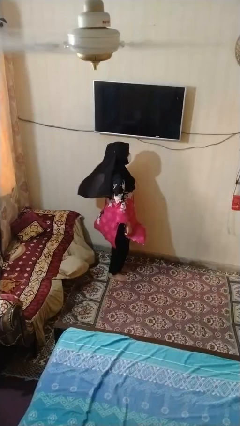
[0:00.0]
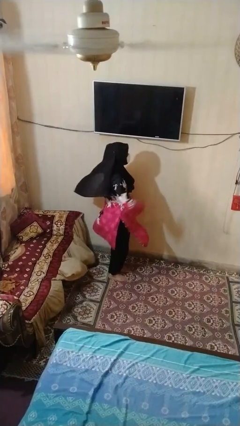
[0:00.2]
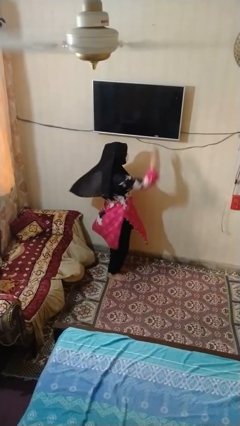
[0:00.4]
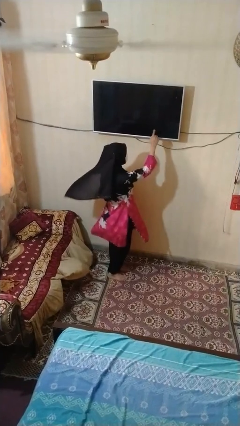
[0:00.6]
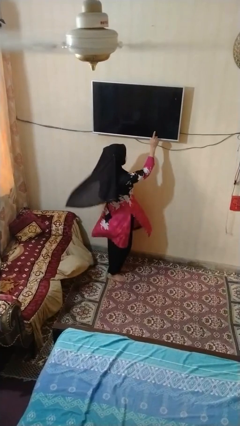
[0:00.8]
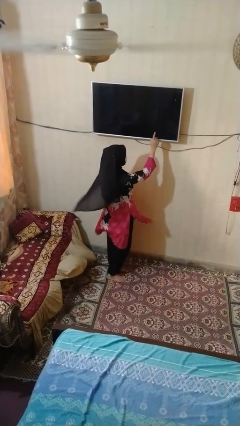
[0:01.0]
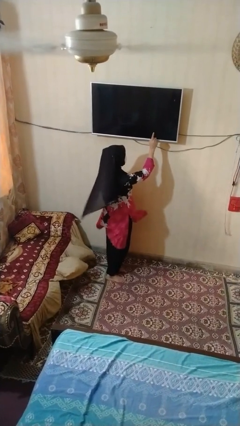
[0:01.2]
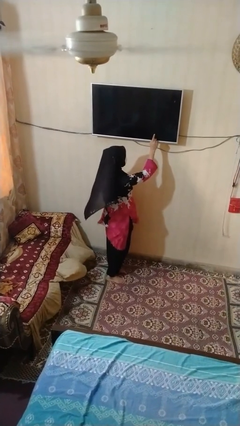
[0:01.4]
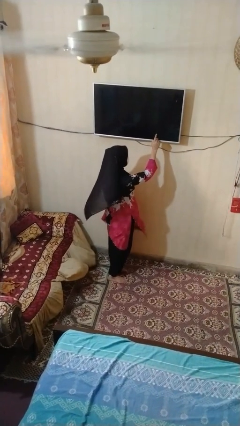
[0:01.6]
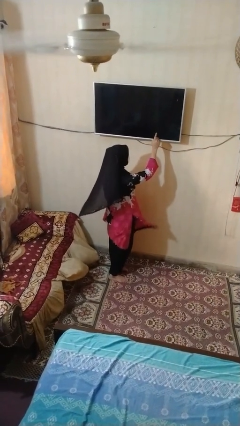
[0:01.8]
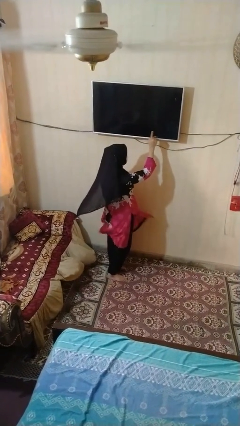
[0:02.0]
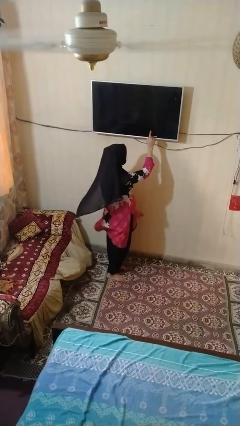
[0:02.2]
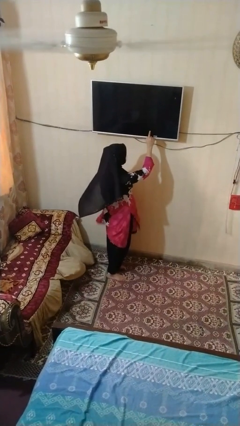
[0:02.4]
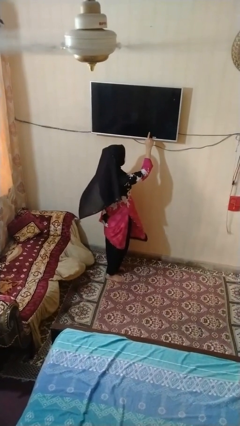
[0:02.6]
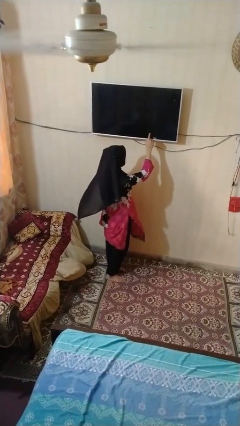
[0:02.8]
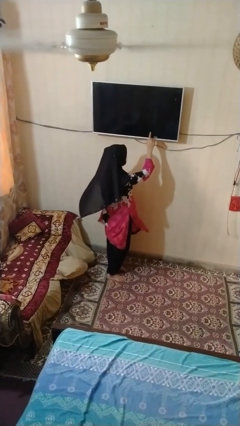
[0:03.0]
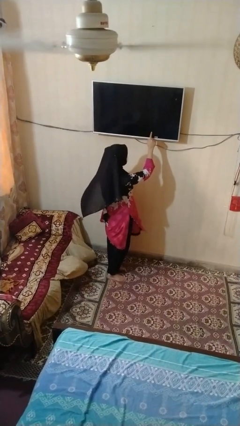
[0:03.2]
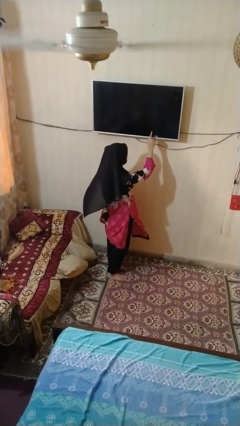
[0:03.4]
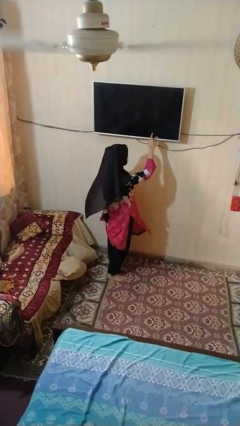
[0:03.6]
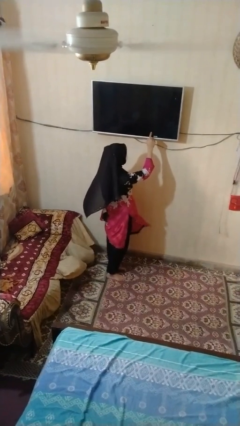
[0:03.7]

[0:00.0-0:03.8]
person taps object with finger

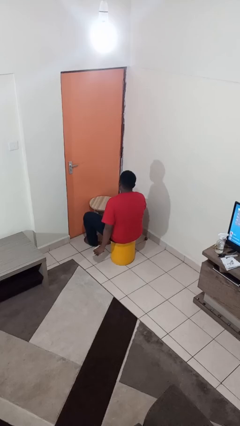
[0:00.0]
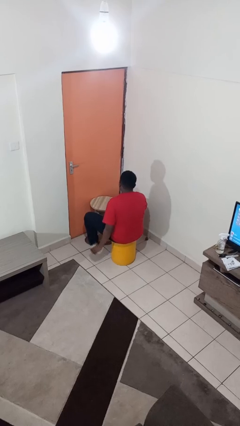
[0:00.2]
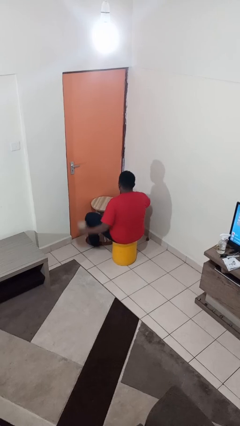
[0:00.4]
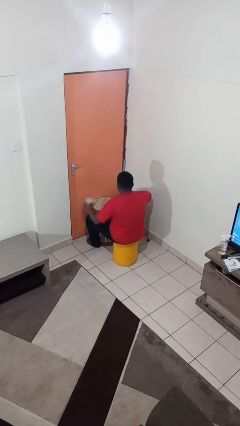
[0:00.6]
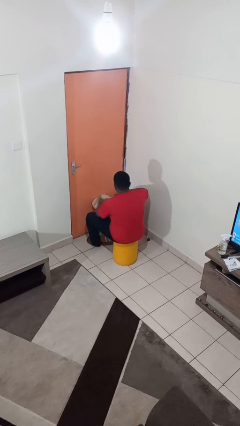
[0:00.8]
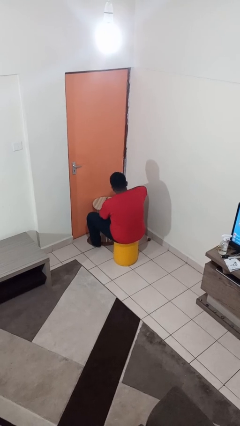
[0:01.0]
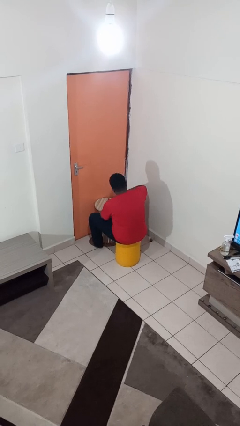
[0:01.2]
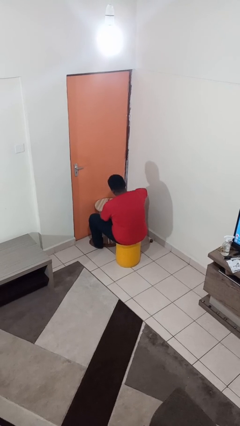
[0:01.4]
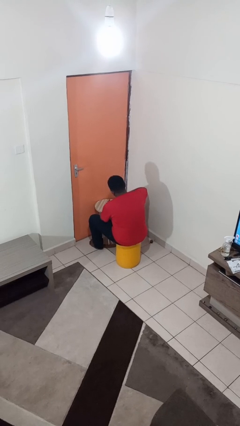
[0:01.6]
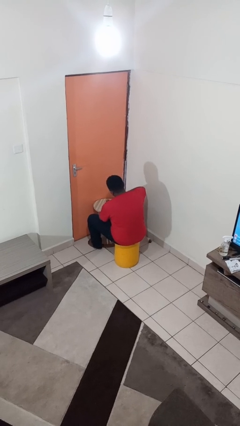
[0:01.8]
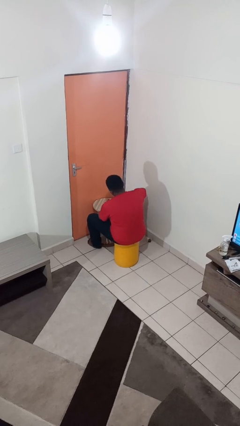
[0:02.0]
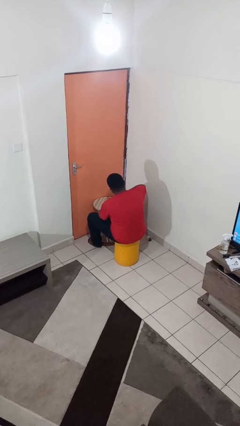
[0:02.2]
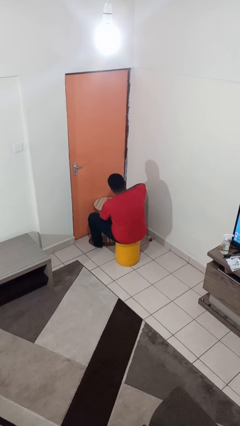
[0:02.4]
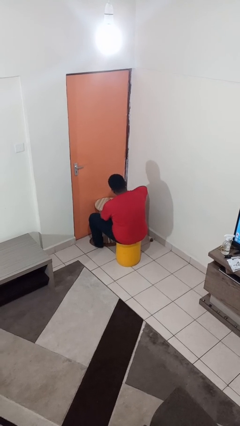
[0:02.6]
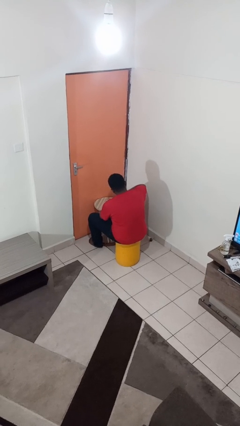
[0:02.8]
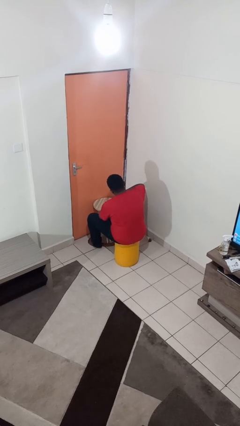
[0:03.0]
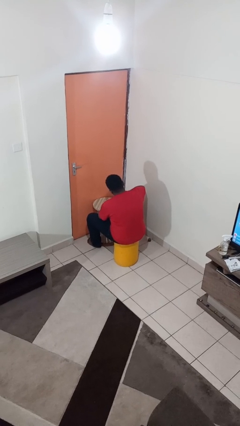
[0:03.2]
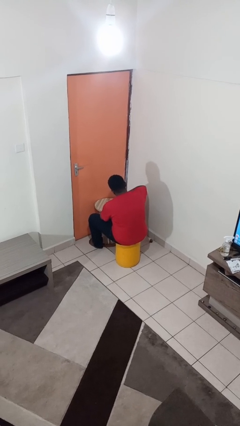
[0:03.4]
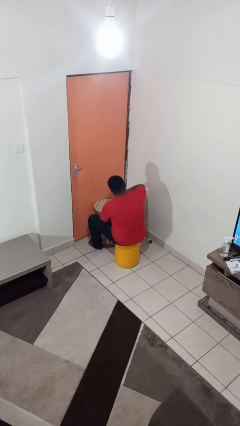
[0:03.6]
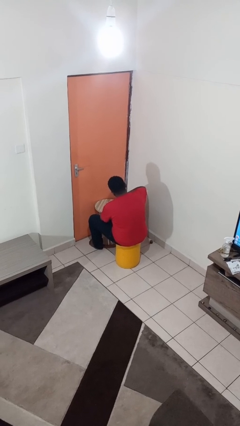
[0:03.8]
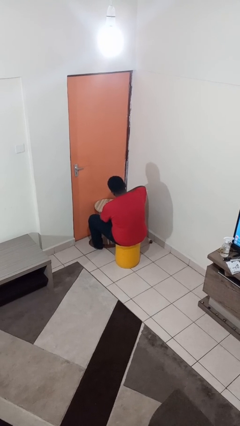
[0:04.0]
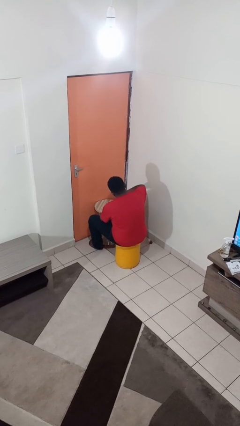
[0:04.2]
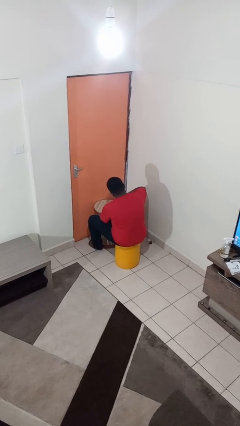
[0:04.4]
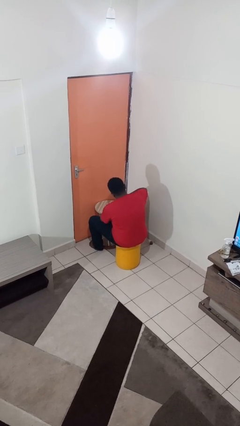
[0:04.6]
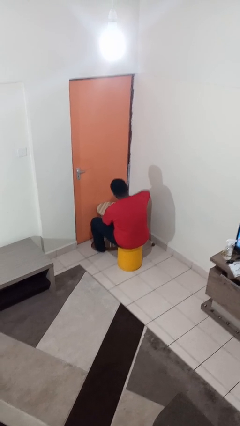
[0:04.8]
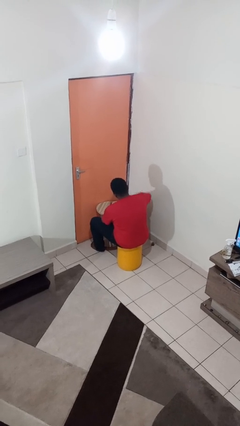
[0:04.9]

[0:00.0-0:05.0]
person opens can with can opener

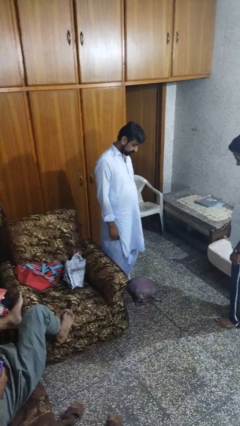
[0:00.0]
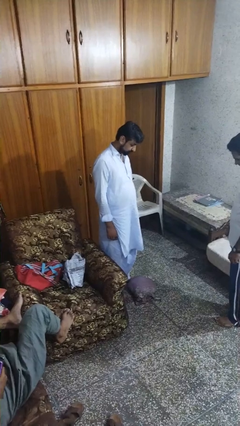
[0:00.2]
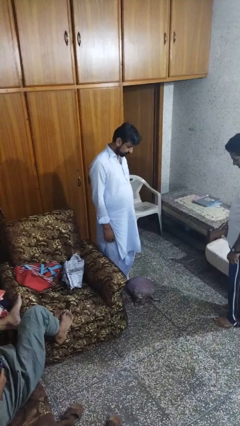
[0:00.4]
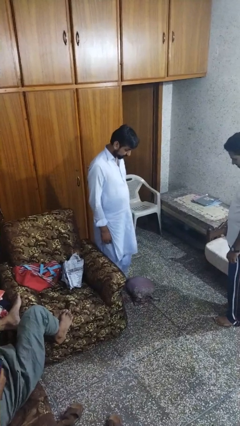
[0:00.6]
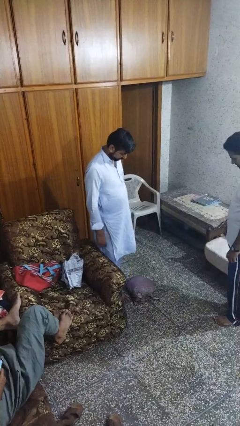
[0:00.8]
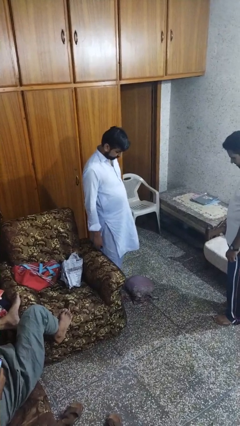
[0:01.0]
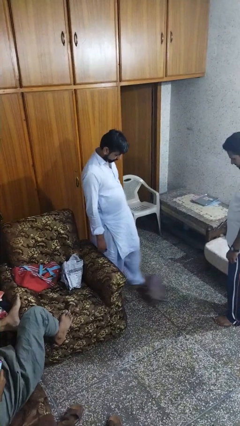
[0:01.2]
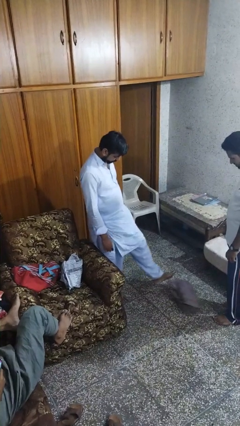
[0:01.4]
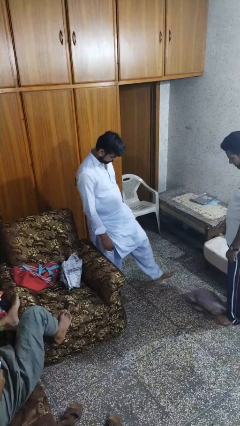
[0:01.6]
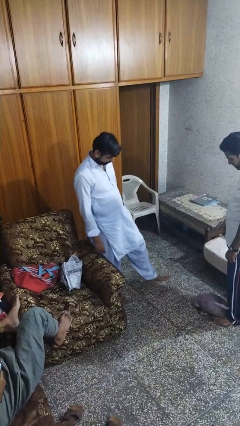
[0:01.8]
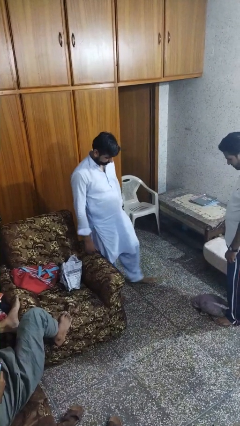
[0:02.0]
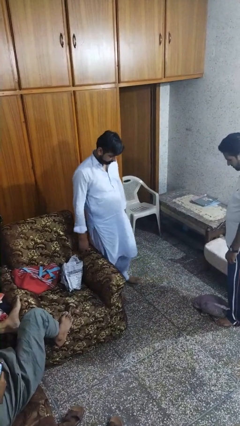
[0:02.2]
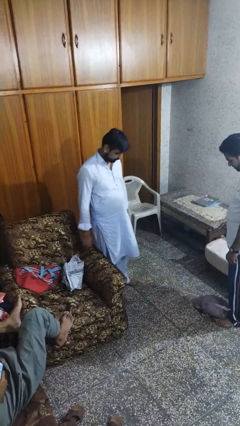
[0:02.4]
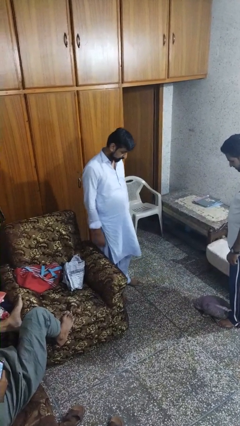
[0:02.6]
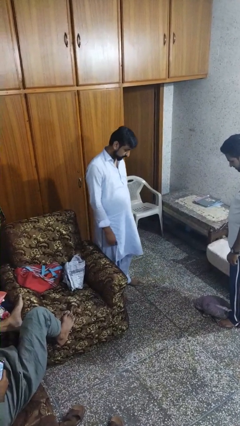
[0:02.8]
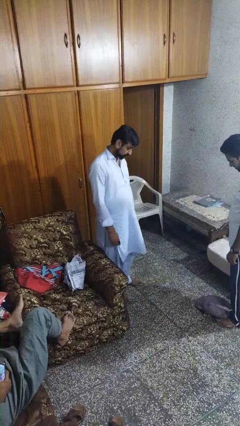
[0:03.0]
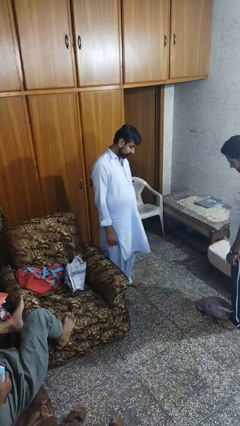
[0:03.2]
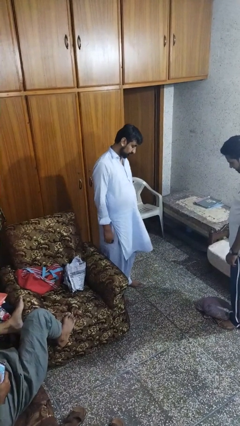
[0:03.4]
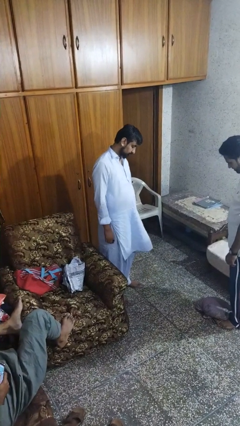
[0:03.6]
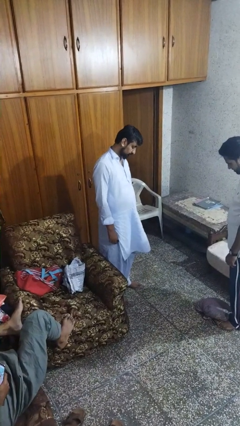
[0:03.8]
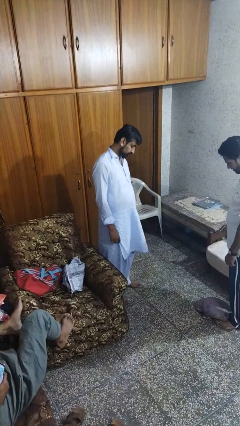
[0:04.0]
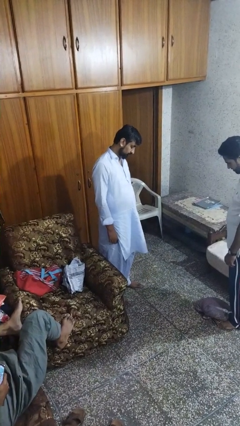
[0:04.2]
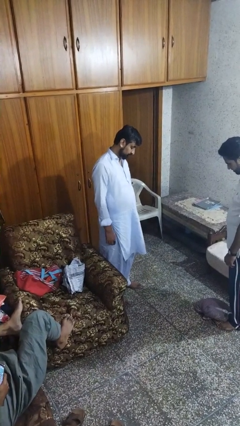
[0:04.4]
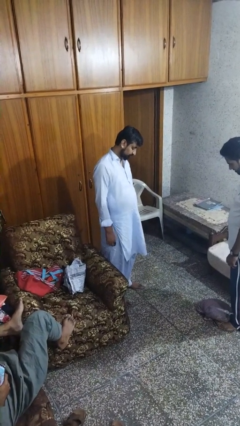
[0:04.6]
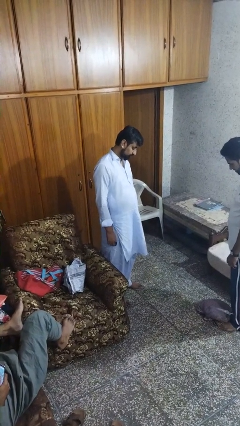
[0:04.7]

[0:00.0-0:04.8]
person kicks object to person

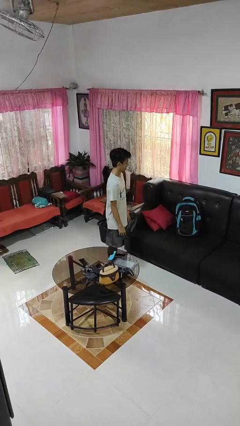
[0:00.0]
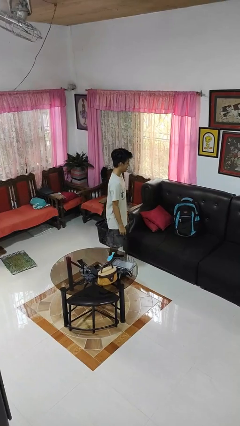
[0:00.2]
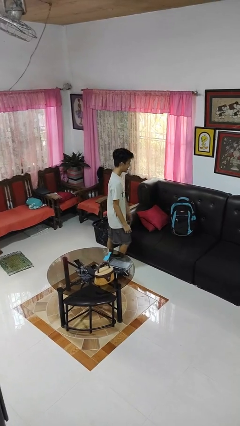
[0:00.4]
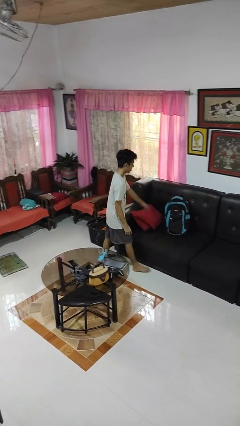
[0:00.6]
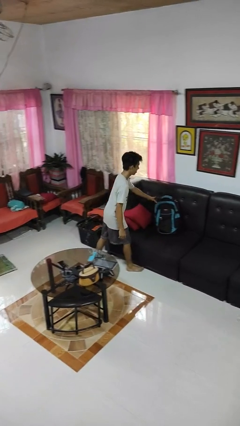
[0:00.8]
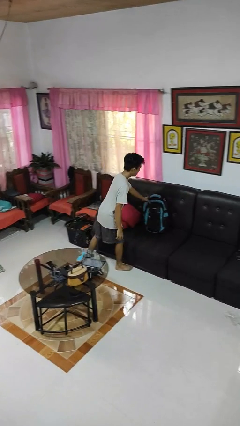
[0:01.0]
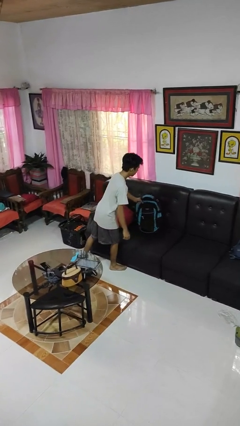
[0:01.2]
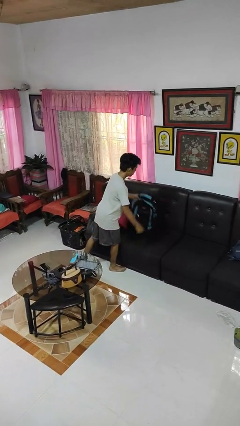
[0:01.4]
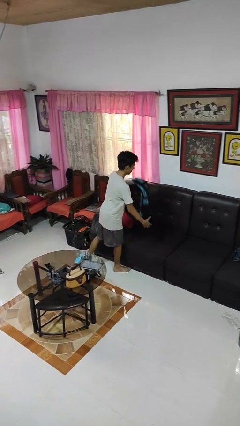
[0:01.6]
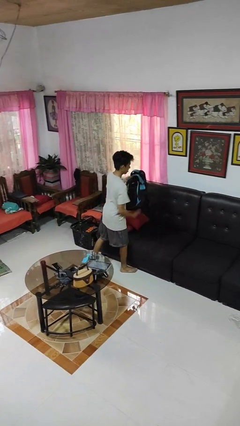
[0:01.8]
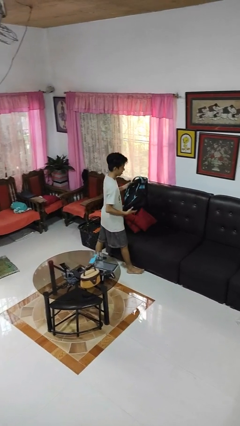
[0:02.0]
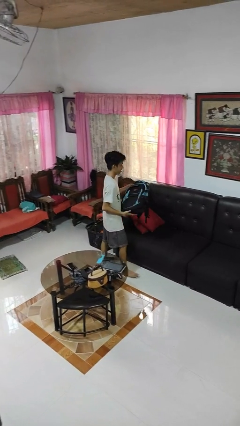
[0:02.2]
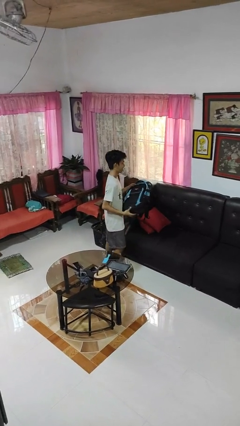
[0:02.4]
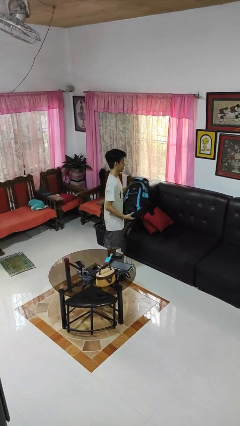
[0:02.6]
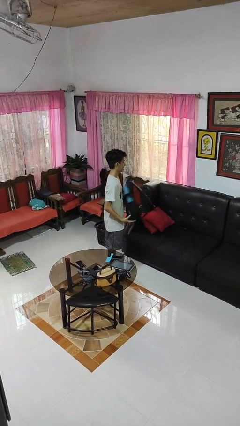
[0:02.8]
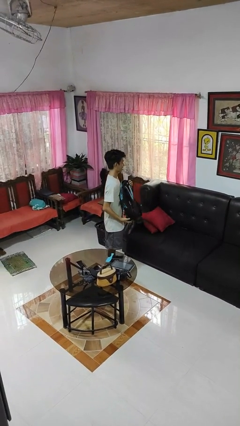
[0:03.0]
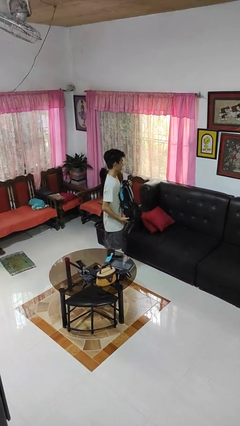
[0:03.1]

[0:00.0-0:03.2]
person picks up object from couch

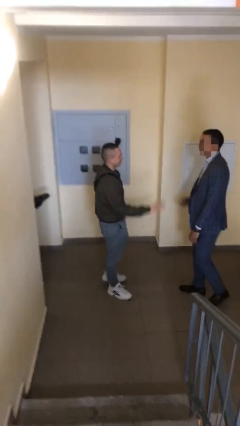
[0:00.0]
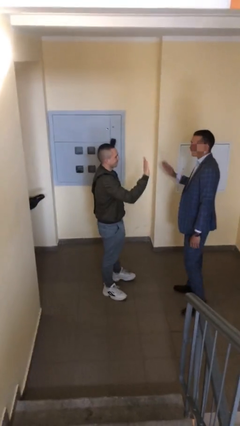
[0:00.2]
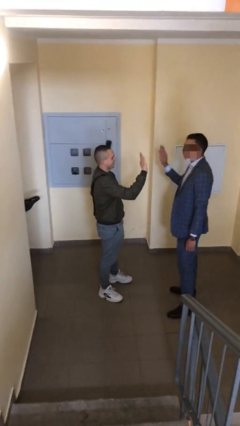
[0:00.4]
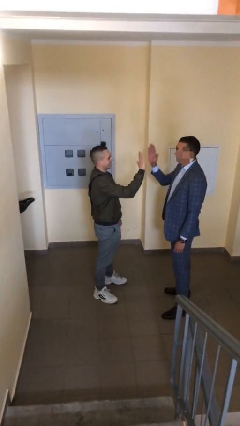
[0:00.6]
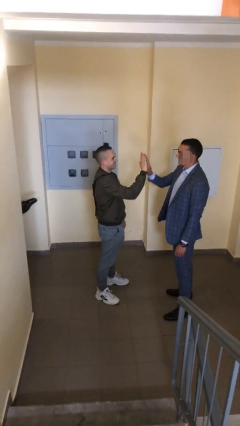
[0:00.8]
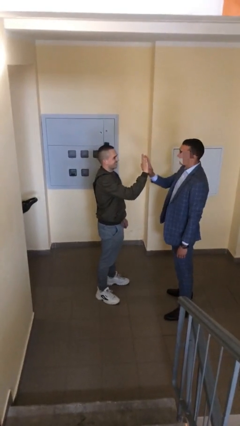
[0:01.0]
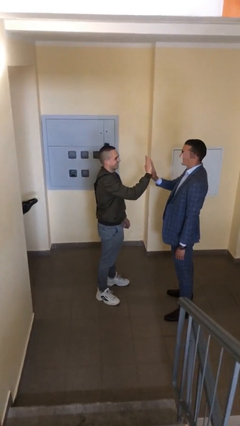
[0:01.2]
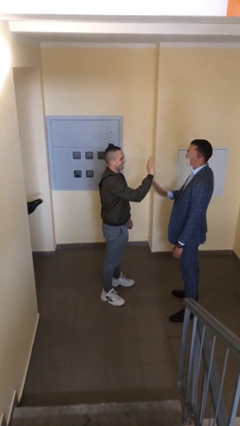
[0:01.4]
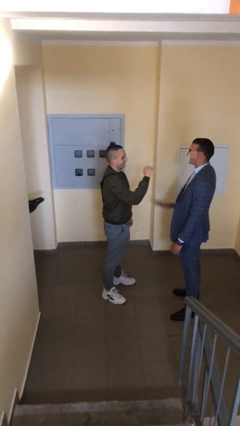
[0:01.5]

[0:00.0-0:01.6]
person highfives hand
